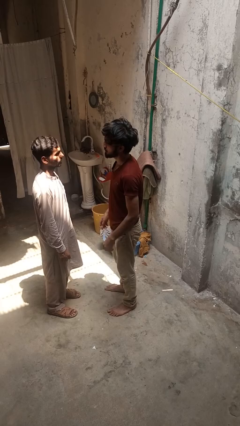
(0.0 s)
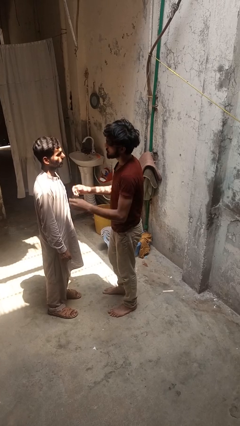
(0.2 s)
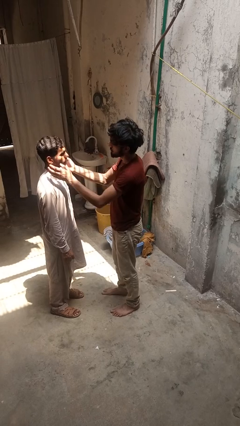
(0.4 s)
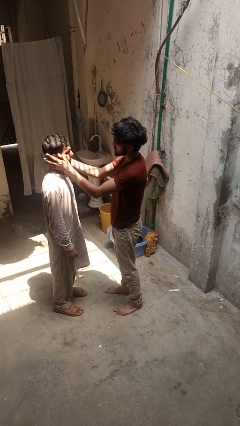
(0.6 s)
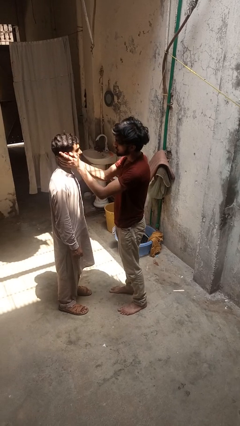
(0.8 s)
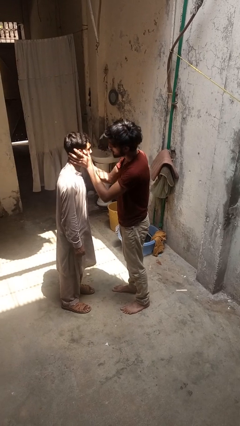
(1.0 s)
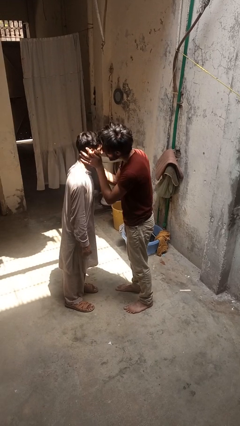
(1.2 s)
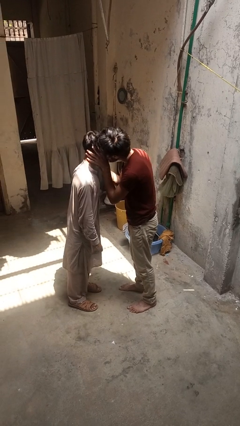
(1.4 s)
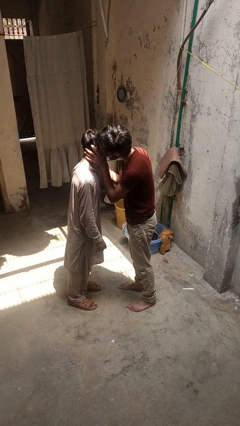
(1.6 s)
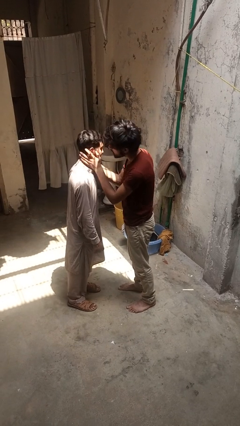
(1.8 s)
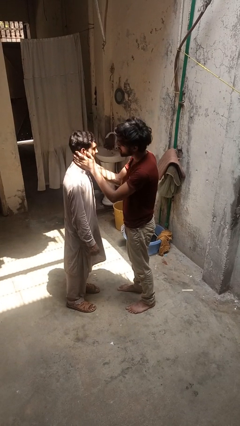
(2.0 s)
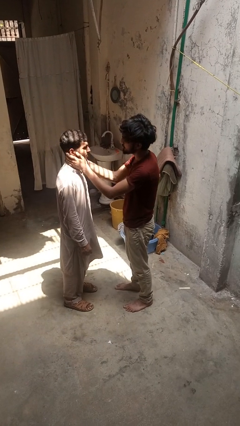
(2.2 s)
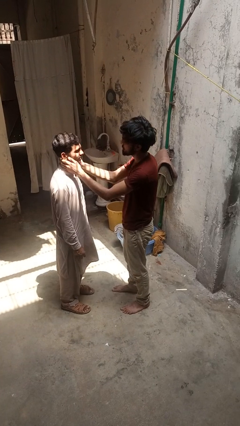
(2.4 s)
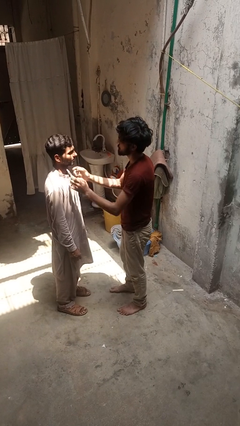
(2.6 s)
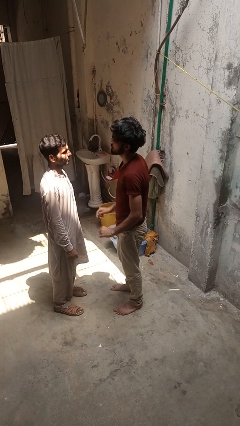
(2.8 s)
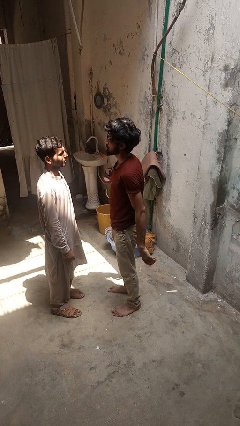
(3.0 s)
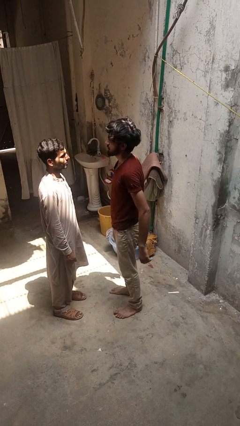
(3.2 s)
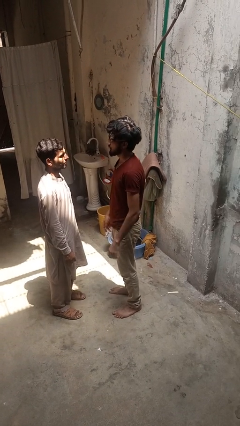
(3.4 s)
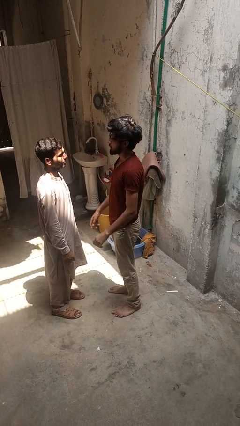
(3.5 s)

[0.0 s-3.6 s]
person kisses cheek of person

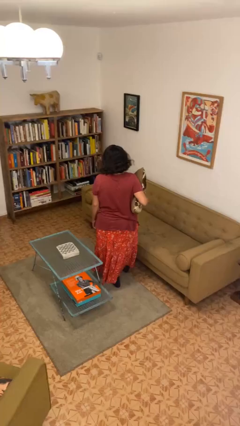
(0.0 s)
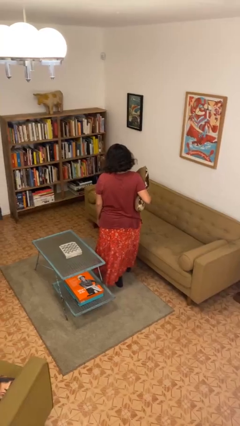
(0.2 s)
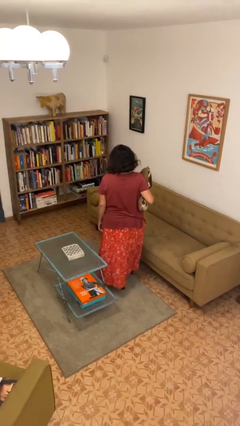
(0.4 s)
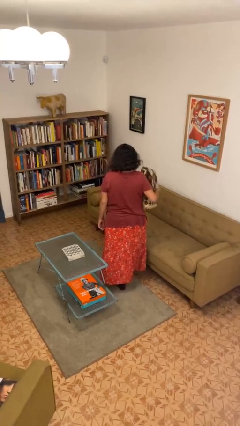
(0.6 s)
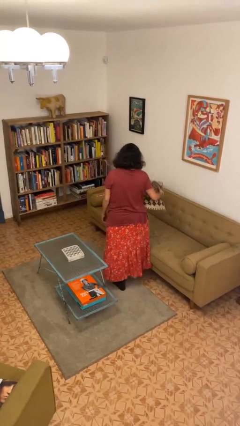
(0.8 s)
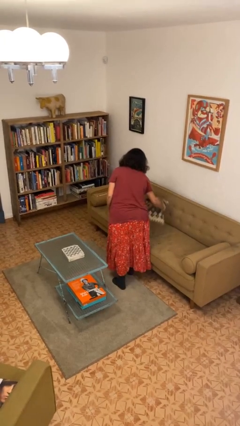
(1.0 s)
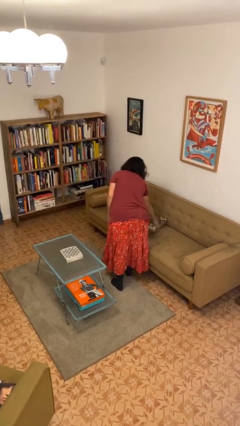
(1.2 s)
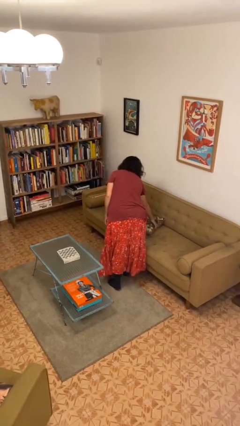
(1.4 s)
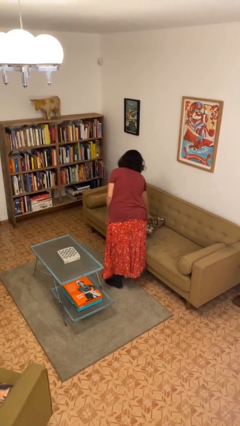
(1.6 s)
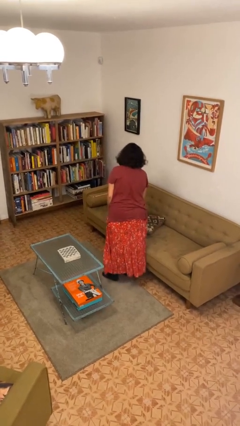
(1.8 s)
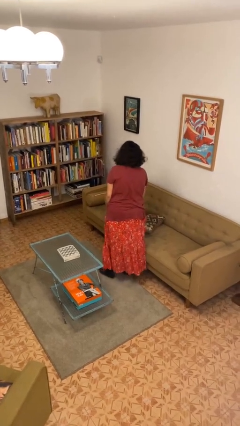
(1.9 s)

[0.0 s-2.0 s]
person puts down object on couch

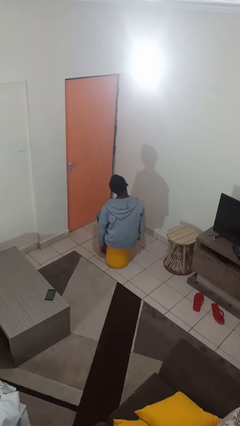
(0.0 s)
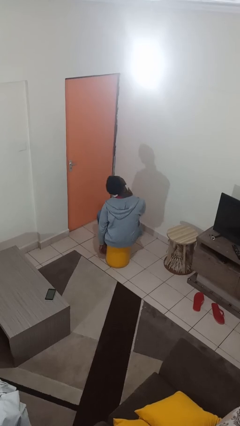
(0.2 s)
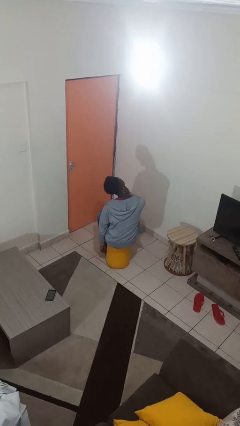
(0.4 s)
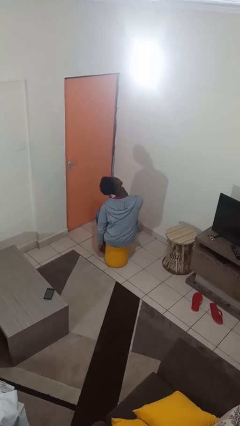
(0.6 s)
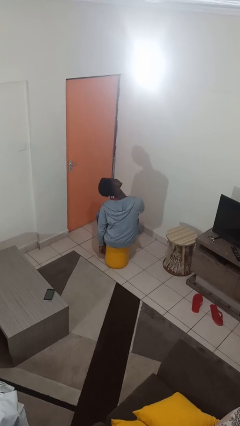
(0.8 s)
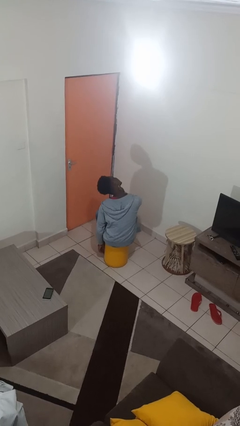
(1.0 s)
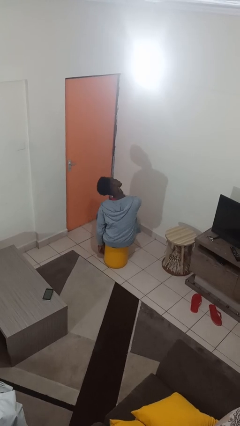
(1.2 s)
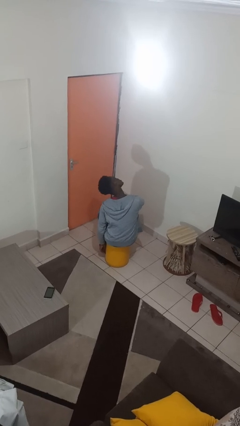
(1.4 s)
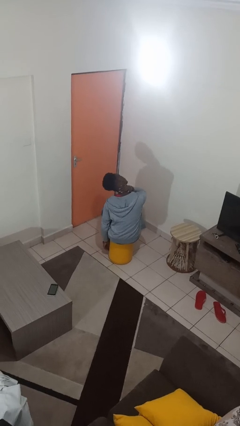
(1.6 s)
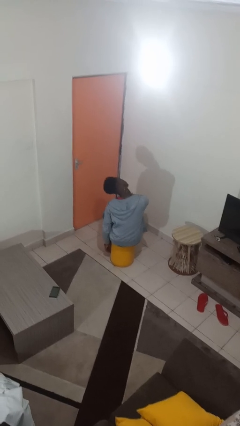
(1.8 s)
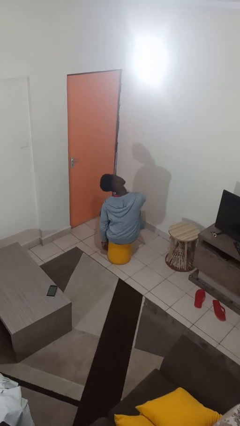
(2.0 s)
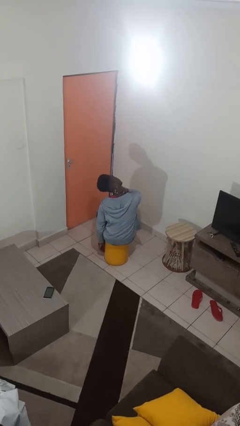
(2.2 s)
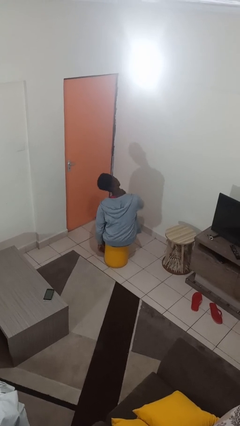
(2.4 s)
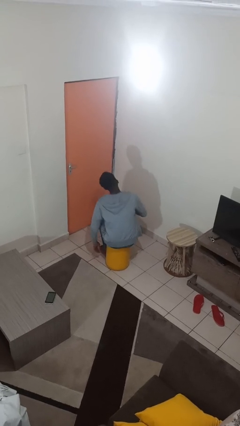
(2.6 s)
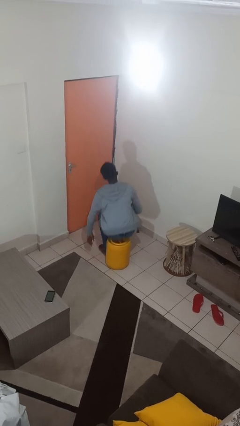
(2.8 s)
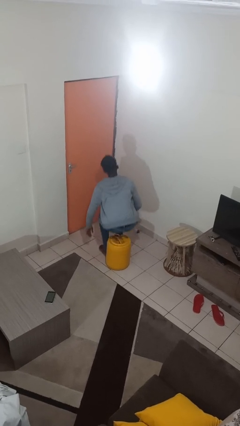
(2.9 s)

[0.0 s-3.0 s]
person rubs neck

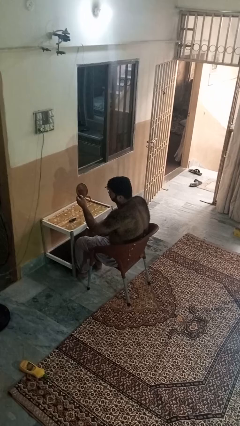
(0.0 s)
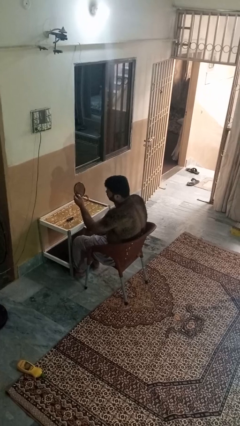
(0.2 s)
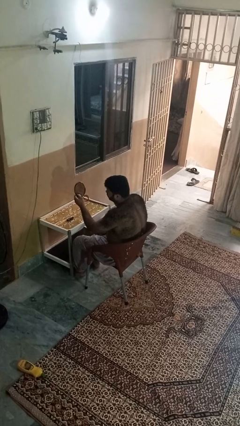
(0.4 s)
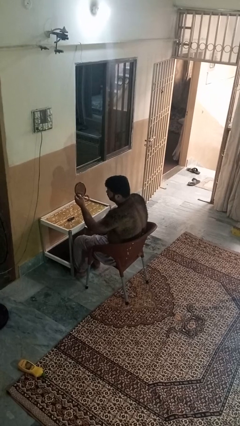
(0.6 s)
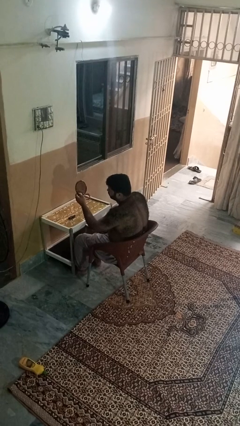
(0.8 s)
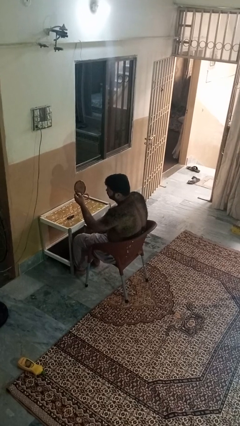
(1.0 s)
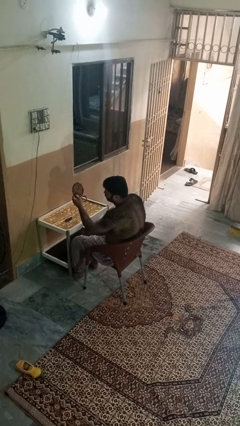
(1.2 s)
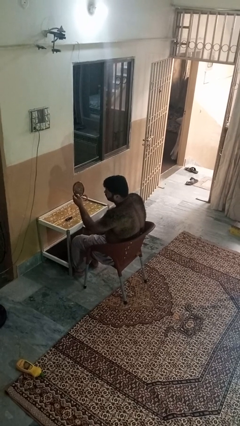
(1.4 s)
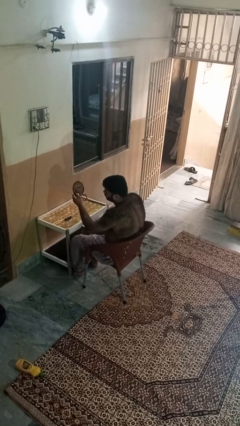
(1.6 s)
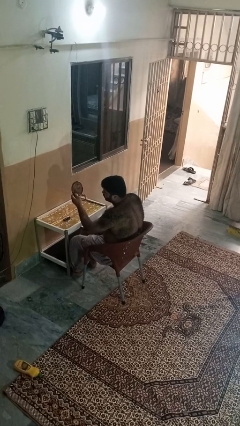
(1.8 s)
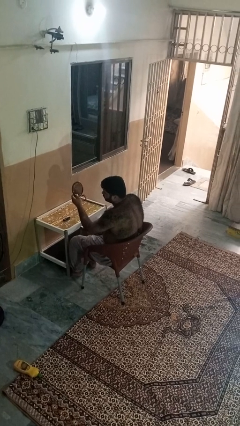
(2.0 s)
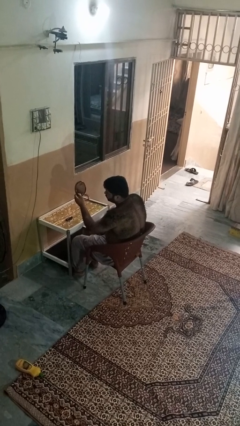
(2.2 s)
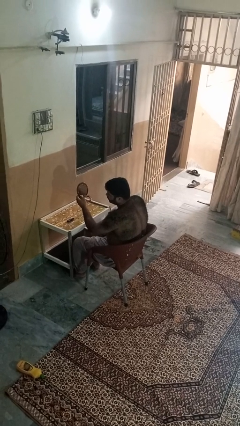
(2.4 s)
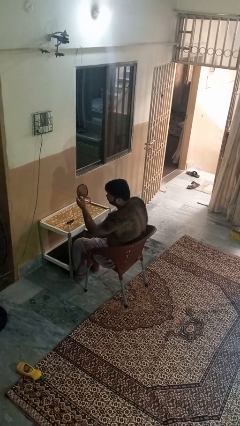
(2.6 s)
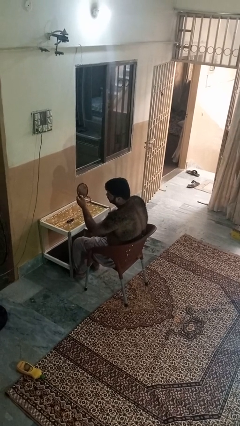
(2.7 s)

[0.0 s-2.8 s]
person applies eye makeup

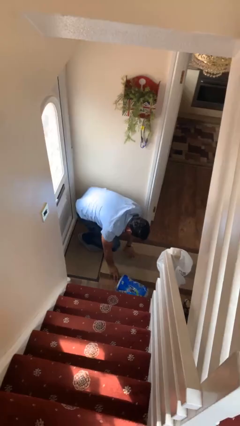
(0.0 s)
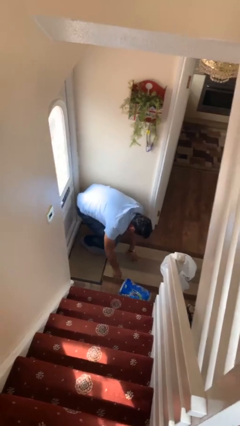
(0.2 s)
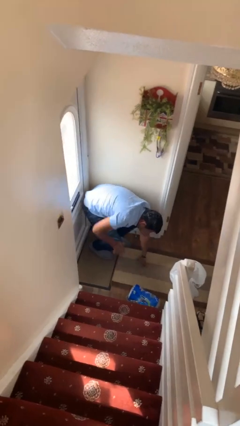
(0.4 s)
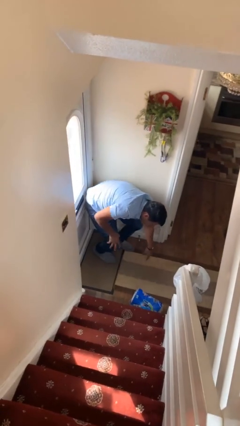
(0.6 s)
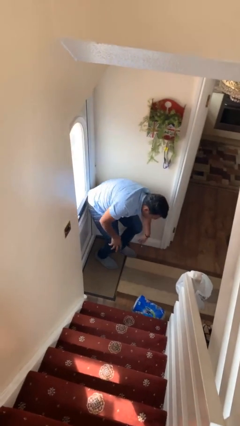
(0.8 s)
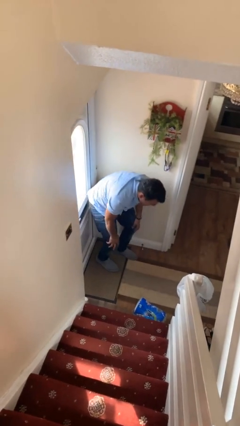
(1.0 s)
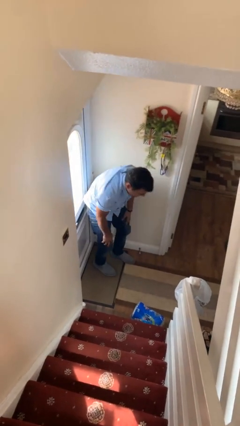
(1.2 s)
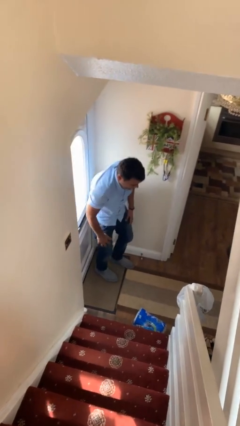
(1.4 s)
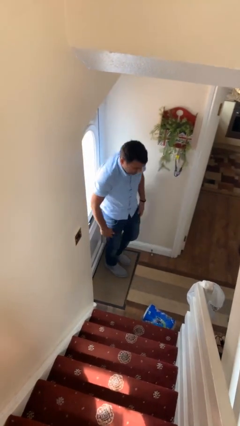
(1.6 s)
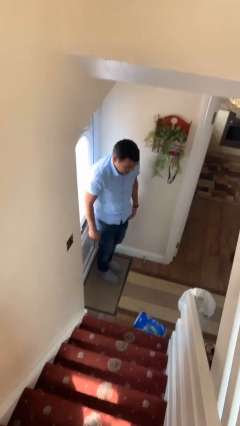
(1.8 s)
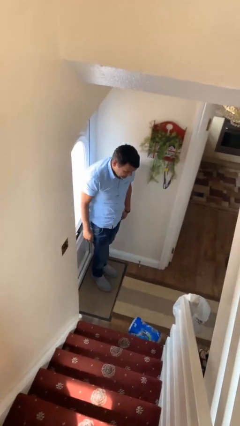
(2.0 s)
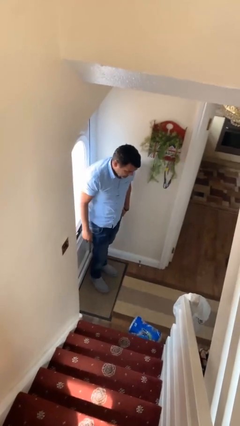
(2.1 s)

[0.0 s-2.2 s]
person stands up from floor

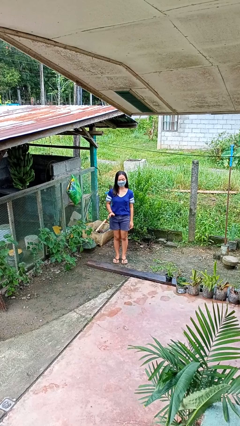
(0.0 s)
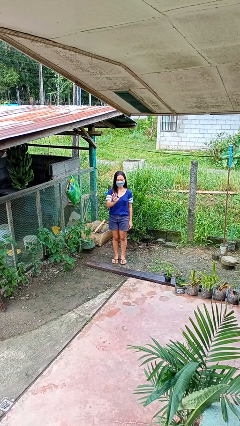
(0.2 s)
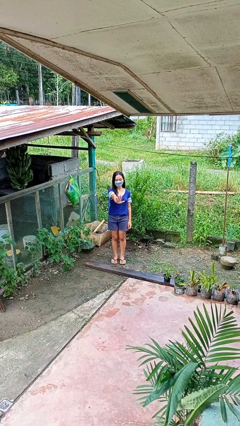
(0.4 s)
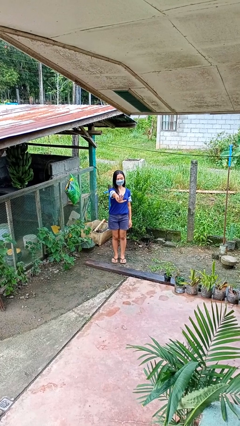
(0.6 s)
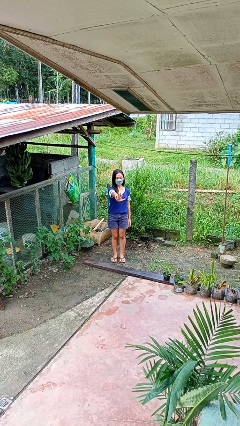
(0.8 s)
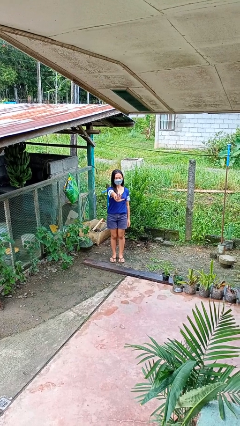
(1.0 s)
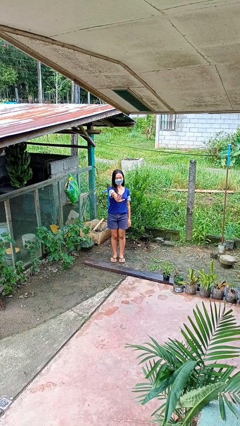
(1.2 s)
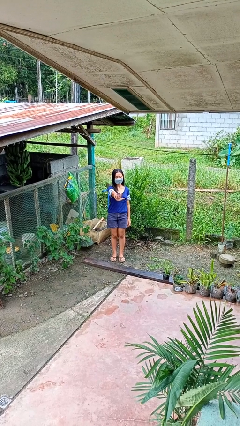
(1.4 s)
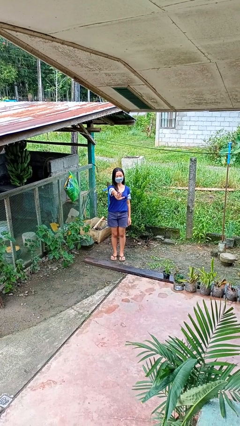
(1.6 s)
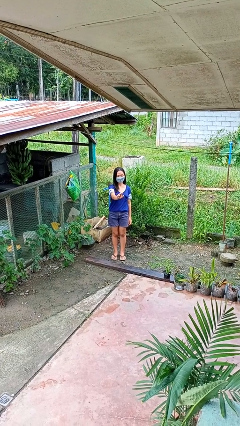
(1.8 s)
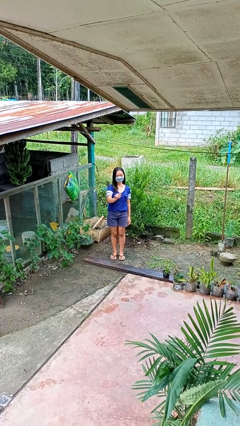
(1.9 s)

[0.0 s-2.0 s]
person gestures stop

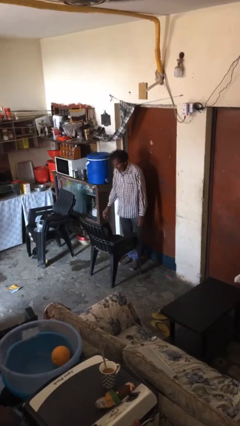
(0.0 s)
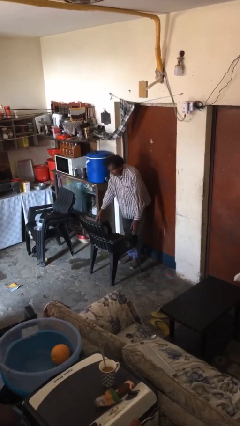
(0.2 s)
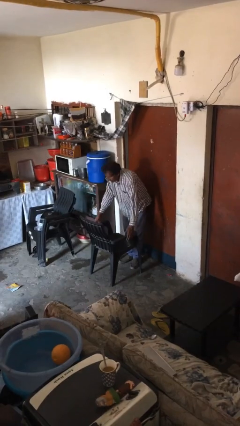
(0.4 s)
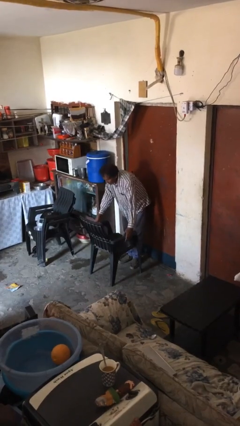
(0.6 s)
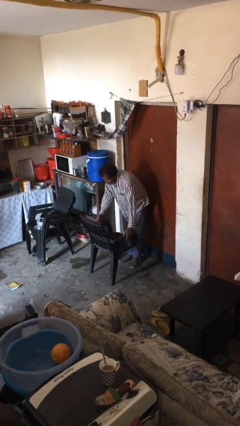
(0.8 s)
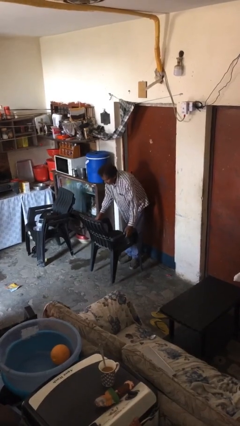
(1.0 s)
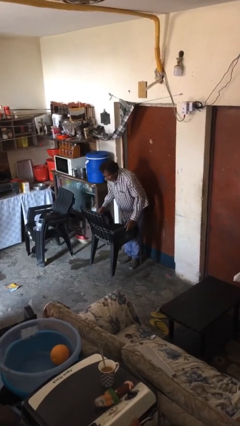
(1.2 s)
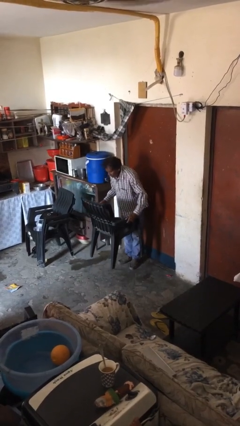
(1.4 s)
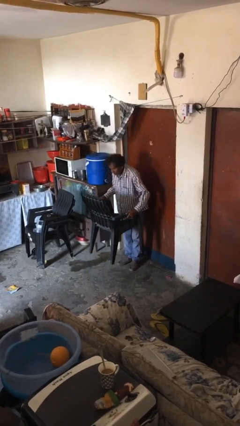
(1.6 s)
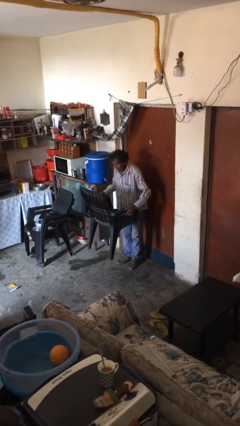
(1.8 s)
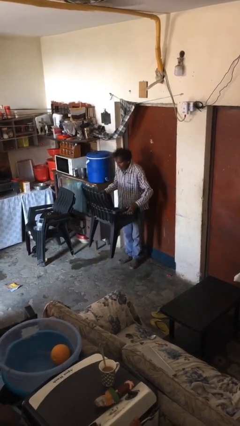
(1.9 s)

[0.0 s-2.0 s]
person picks up object from floor
